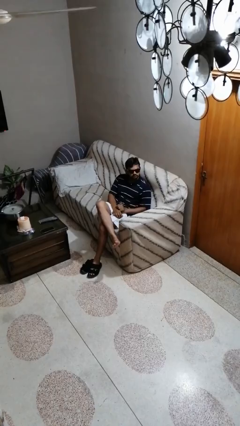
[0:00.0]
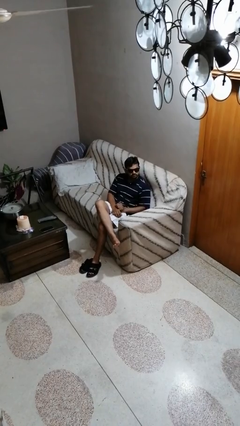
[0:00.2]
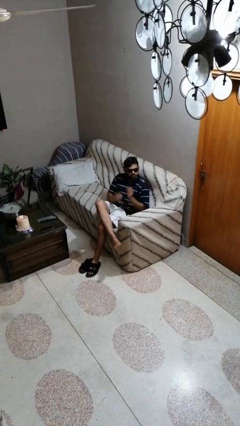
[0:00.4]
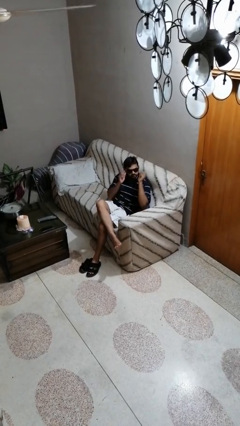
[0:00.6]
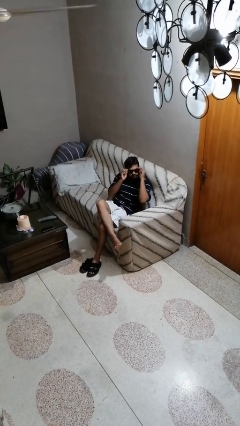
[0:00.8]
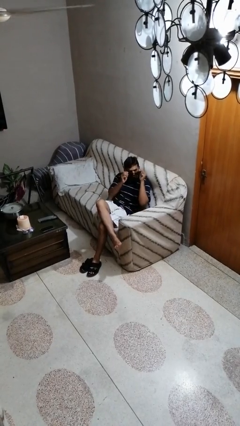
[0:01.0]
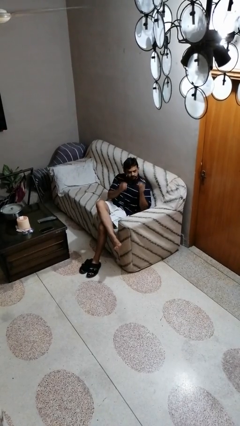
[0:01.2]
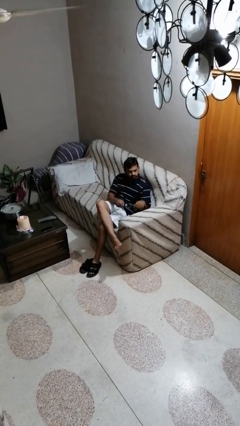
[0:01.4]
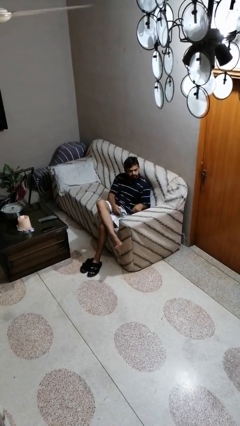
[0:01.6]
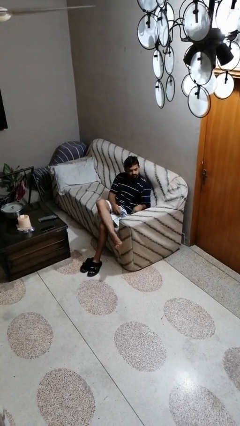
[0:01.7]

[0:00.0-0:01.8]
person takes off sunglasses

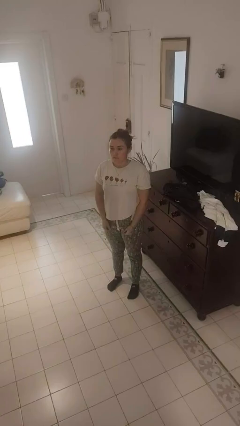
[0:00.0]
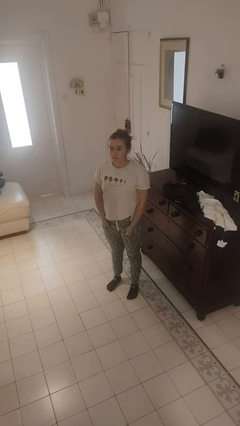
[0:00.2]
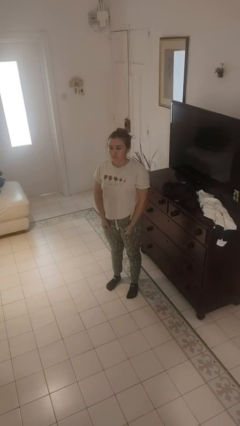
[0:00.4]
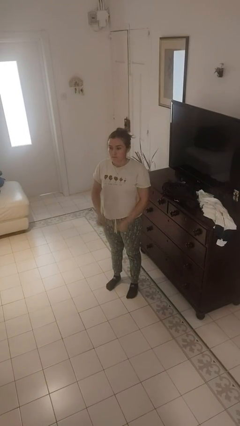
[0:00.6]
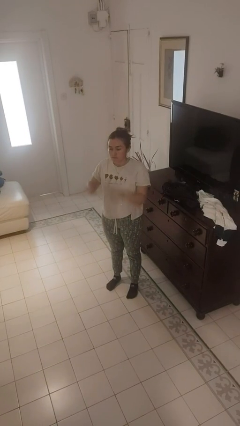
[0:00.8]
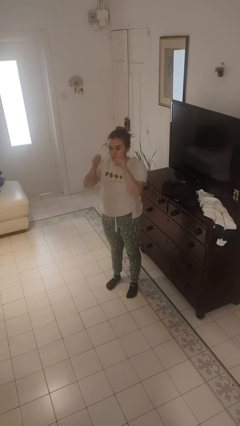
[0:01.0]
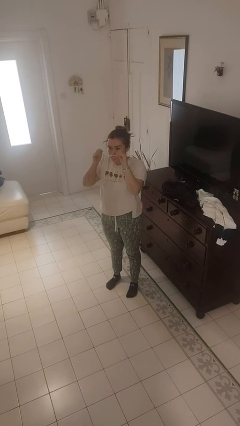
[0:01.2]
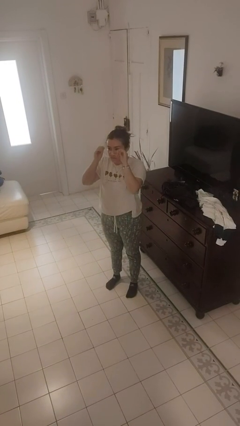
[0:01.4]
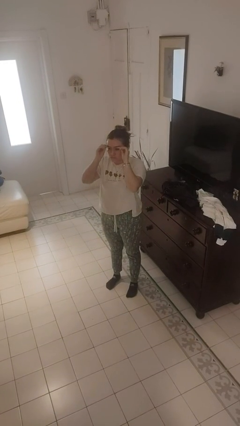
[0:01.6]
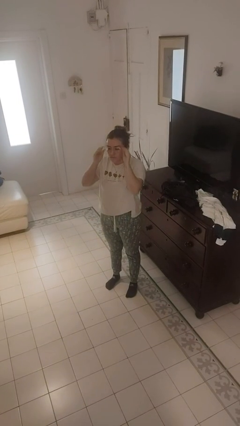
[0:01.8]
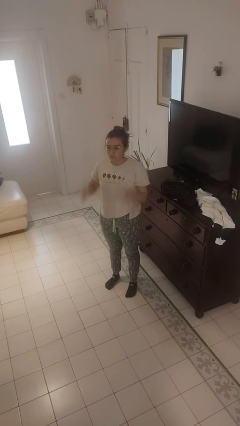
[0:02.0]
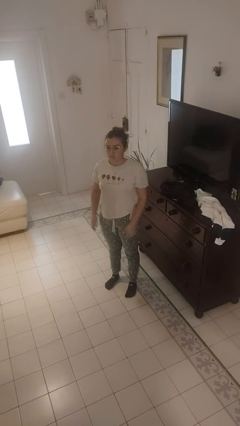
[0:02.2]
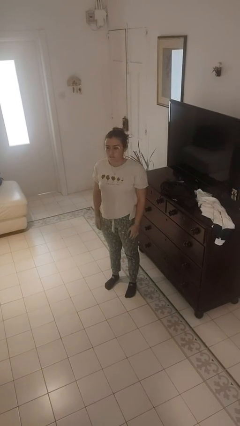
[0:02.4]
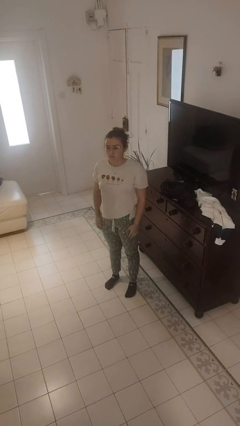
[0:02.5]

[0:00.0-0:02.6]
person puts on glasses

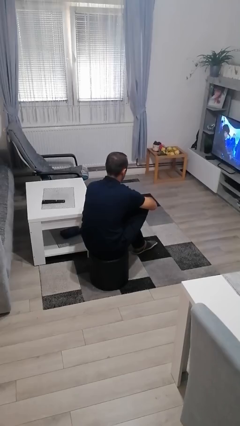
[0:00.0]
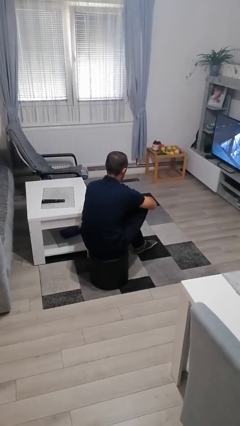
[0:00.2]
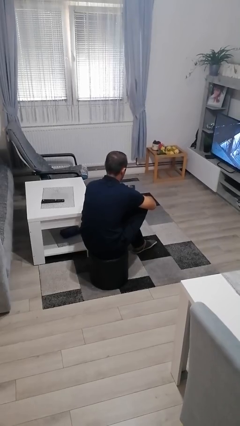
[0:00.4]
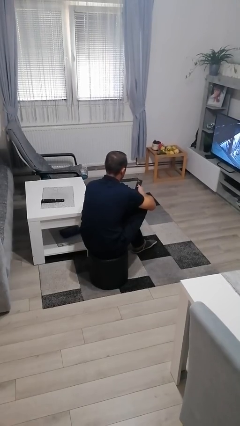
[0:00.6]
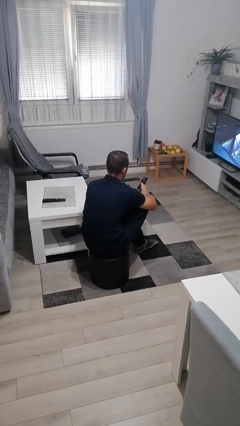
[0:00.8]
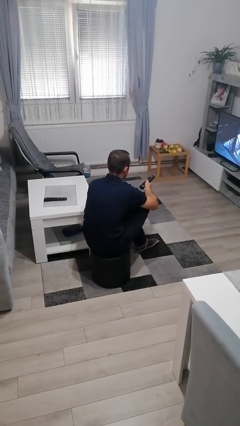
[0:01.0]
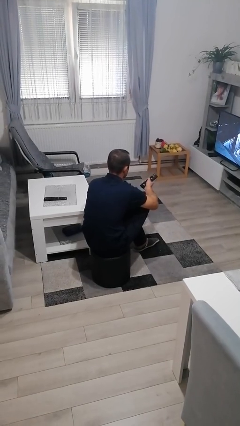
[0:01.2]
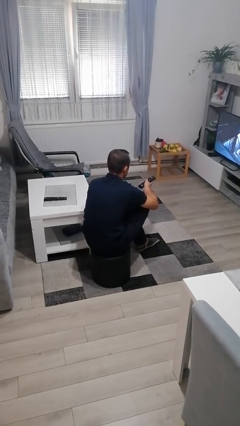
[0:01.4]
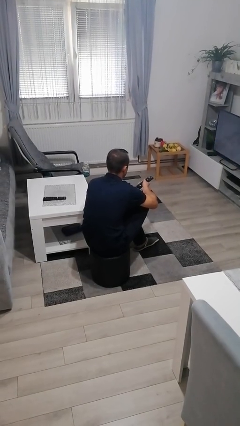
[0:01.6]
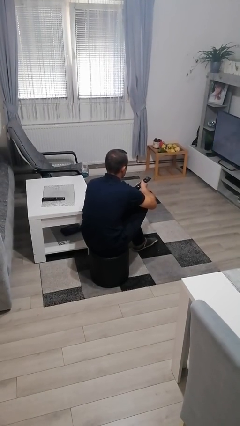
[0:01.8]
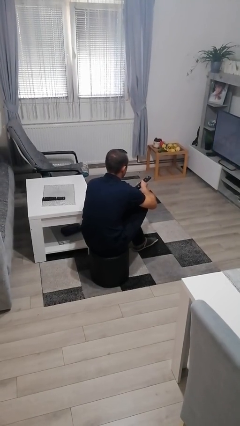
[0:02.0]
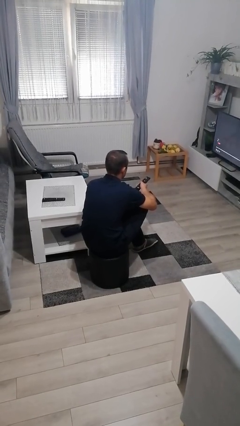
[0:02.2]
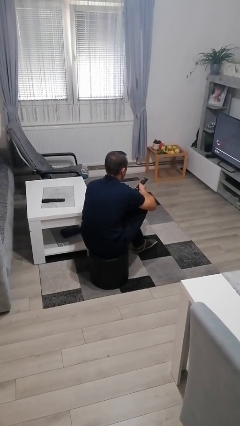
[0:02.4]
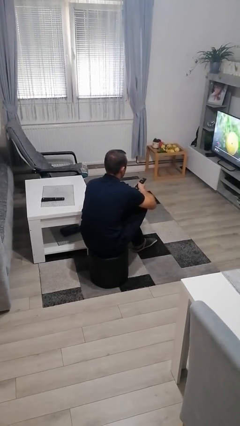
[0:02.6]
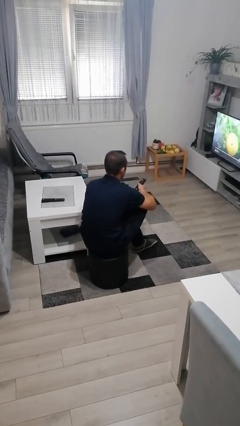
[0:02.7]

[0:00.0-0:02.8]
person uses television remote

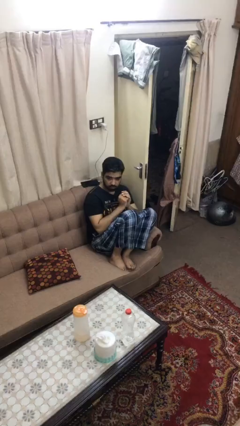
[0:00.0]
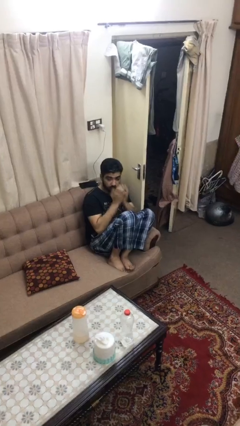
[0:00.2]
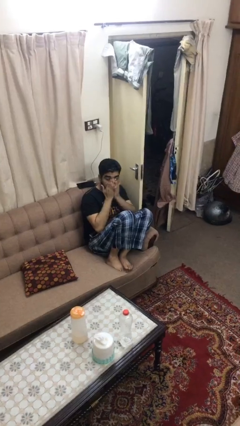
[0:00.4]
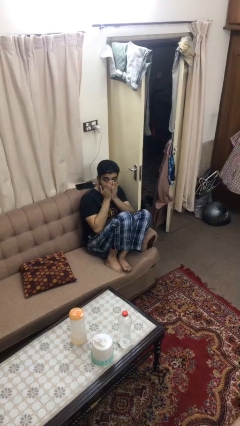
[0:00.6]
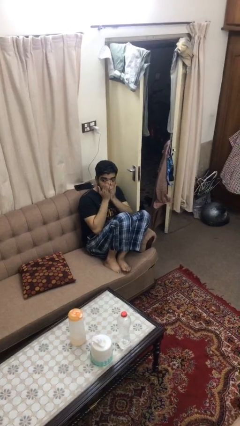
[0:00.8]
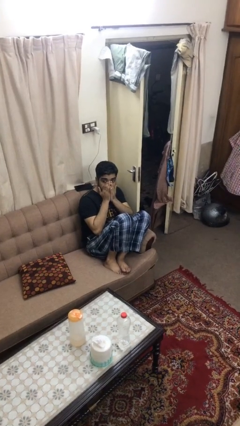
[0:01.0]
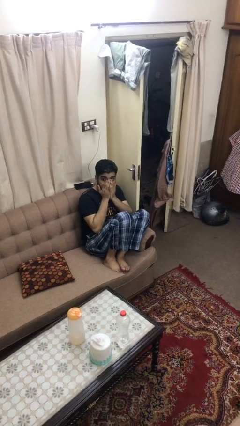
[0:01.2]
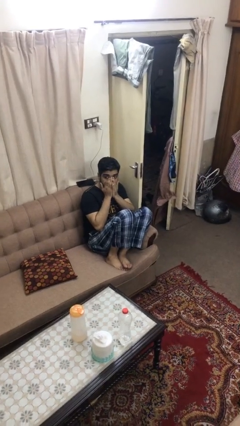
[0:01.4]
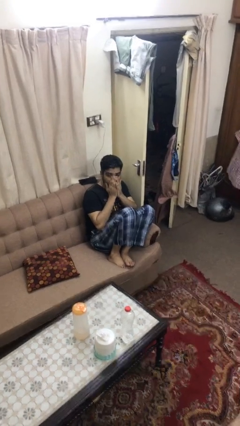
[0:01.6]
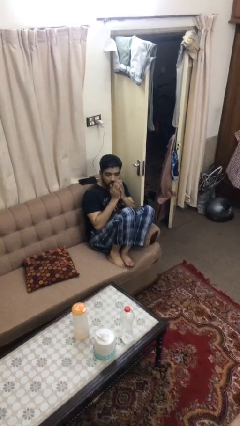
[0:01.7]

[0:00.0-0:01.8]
person covers face with hands

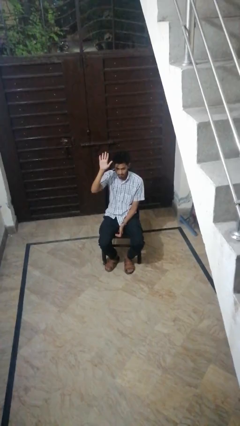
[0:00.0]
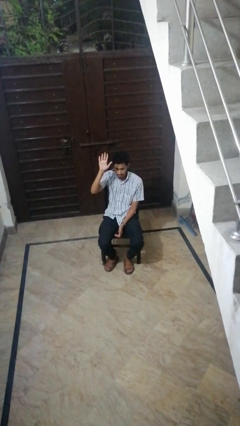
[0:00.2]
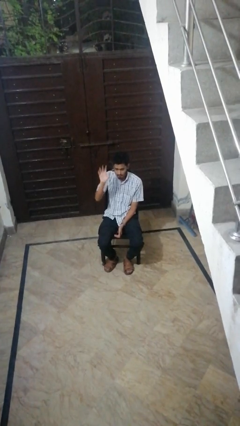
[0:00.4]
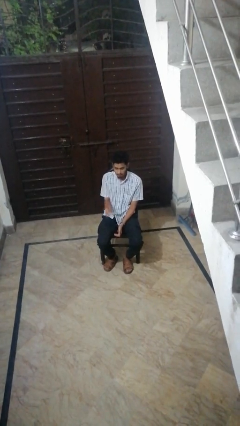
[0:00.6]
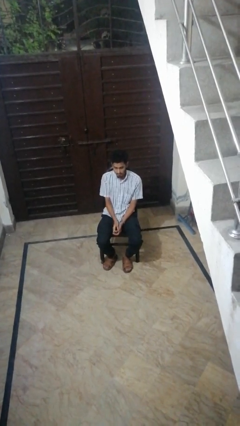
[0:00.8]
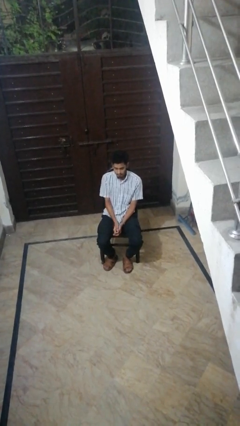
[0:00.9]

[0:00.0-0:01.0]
person gestures lower hand

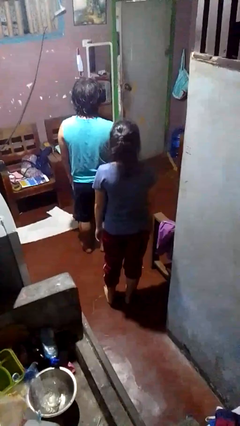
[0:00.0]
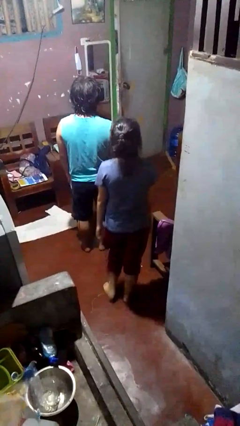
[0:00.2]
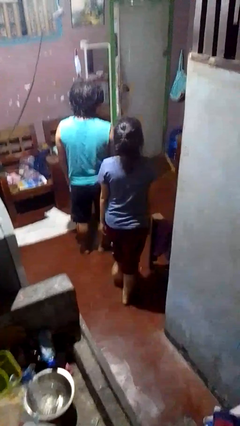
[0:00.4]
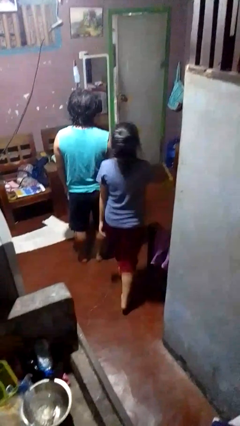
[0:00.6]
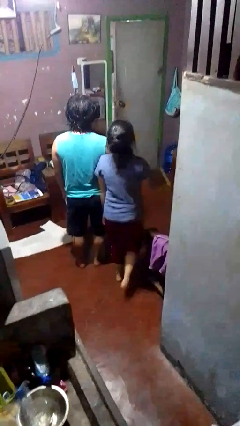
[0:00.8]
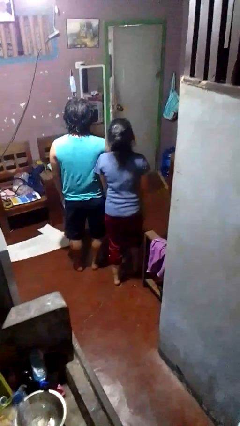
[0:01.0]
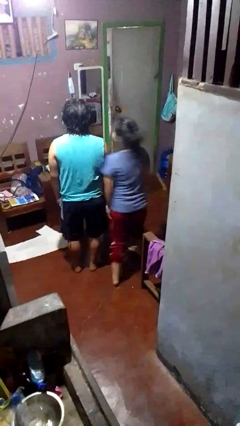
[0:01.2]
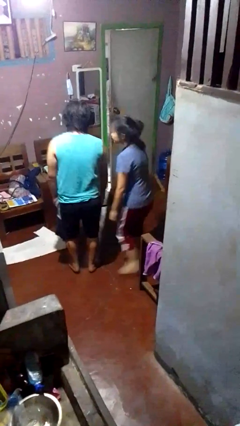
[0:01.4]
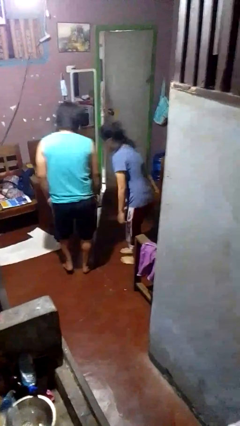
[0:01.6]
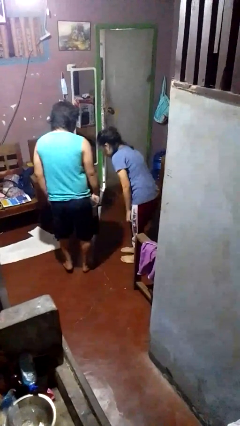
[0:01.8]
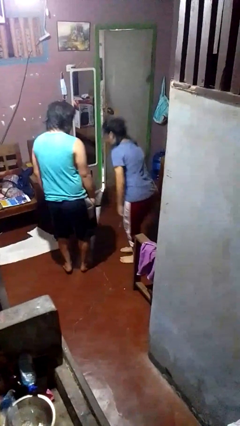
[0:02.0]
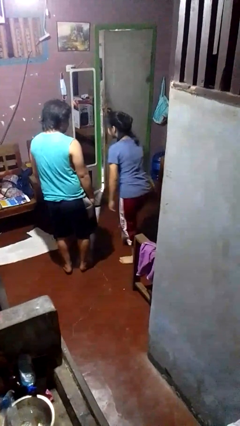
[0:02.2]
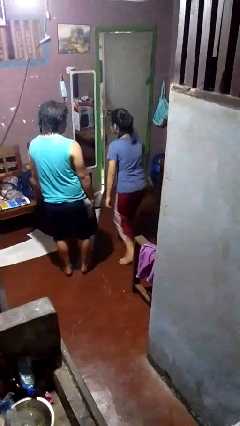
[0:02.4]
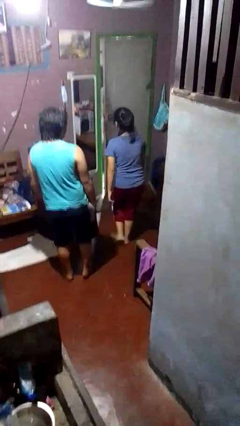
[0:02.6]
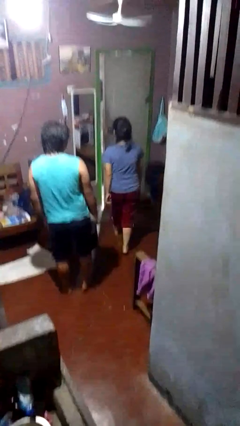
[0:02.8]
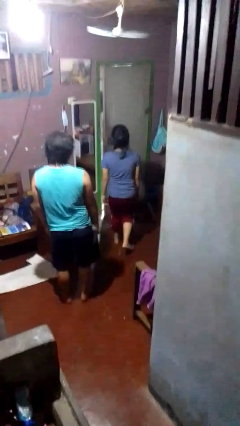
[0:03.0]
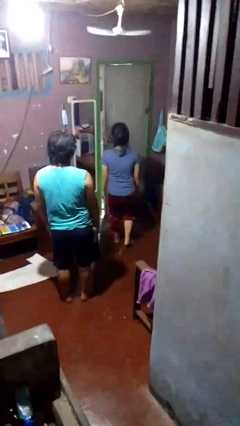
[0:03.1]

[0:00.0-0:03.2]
person bumps into person

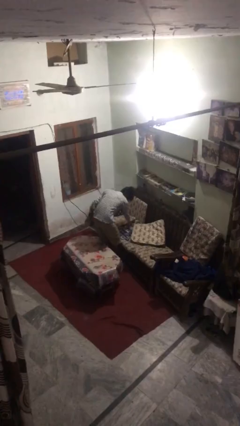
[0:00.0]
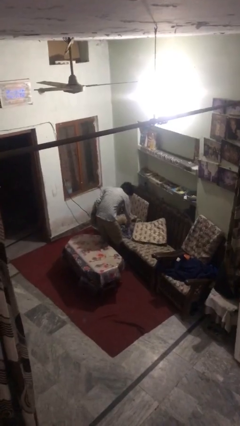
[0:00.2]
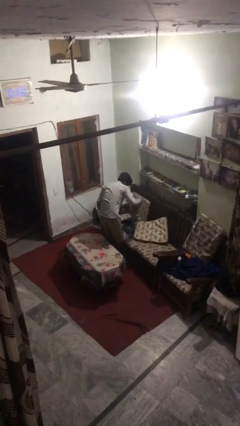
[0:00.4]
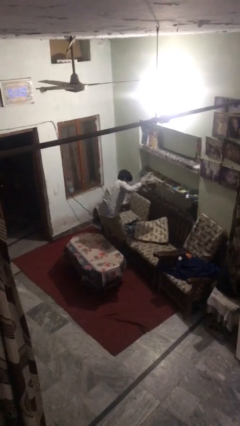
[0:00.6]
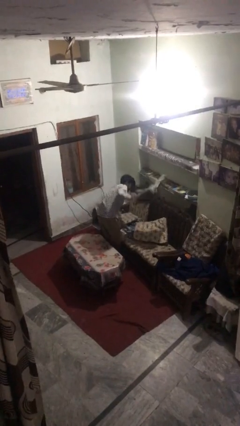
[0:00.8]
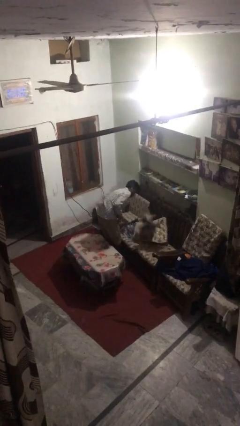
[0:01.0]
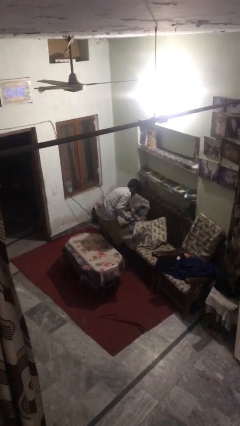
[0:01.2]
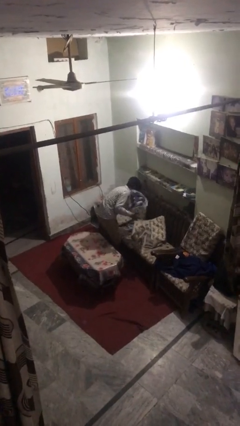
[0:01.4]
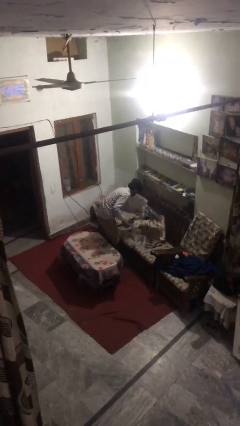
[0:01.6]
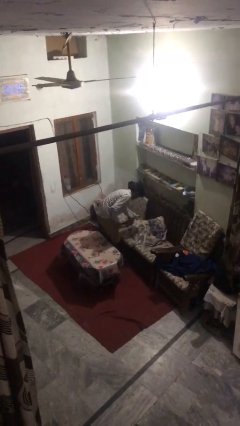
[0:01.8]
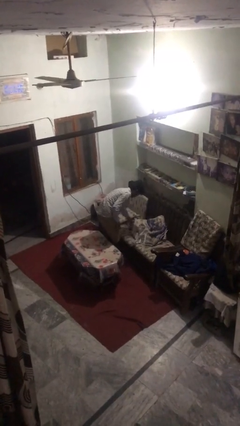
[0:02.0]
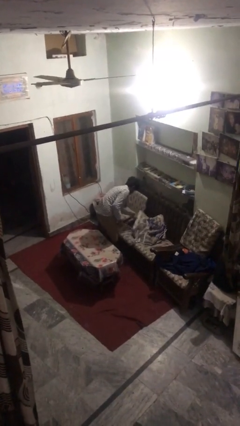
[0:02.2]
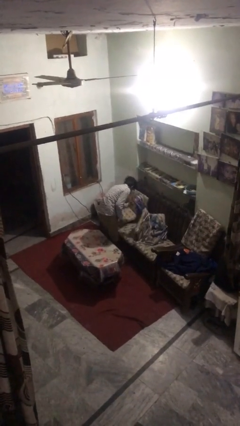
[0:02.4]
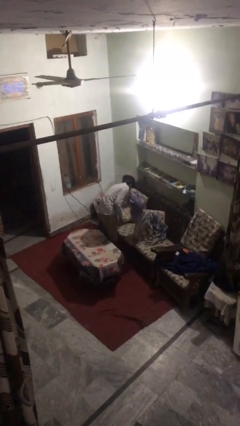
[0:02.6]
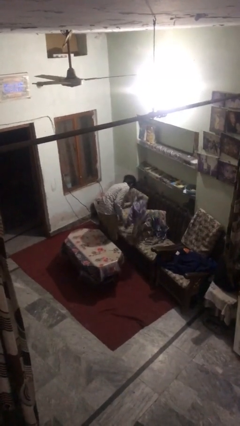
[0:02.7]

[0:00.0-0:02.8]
person searches in couch

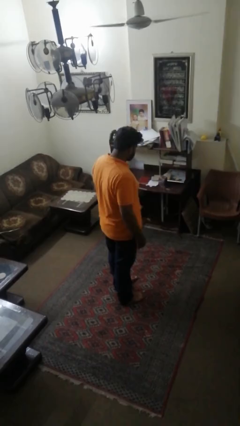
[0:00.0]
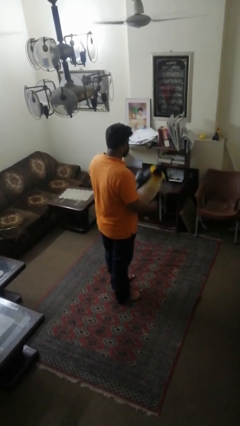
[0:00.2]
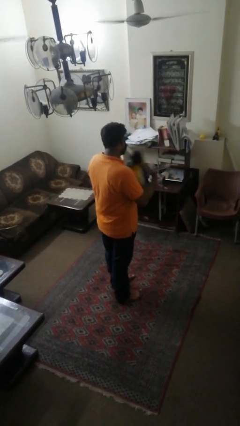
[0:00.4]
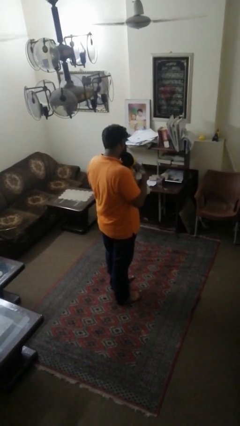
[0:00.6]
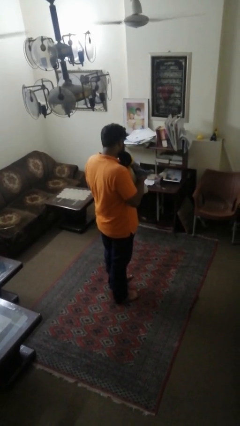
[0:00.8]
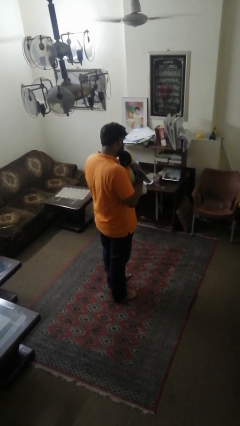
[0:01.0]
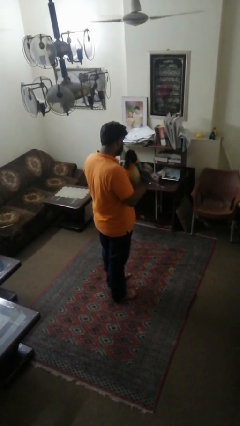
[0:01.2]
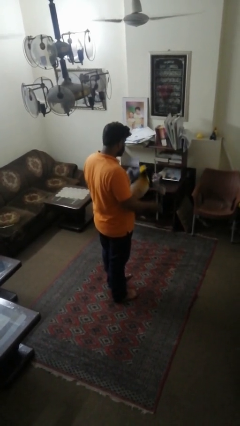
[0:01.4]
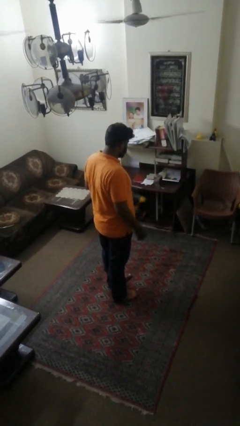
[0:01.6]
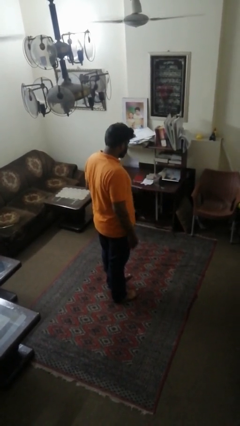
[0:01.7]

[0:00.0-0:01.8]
person hugs stuffed animal
